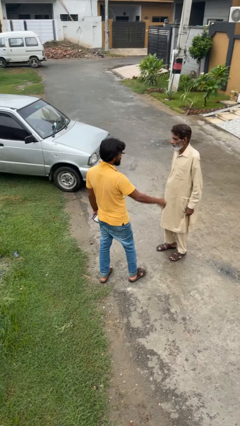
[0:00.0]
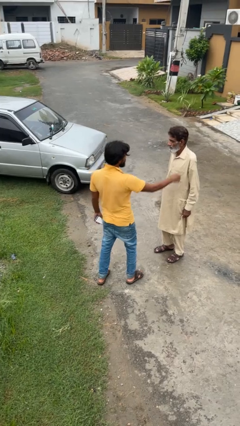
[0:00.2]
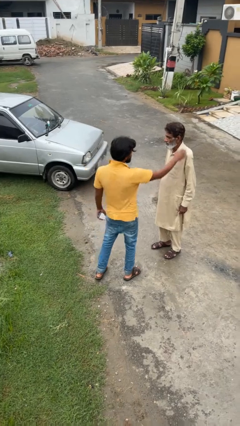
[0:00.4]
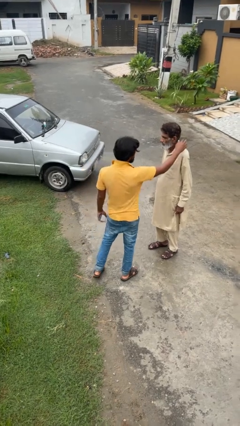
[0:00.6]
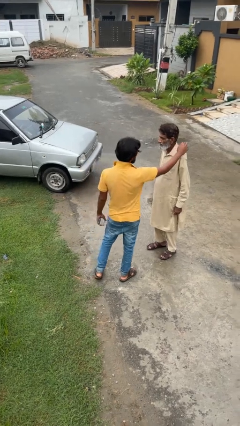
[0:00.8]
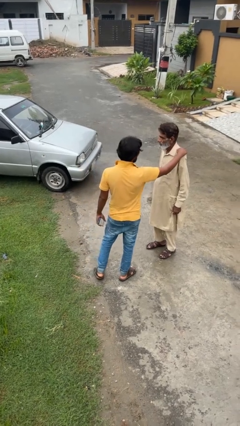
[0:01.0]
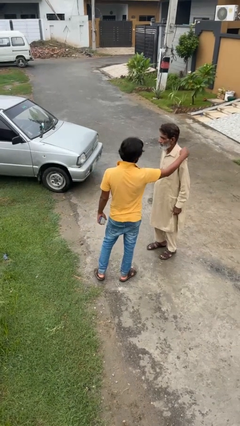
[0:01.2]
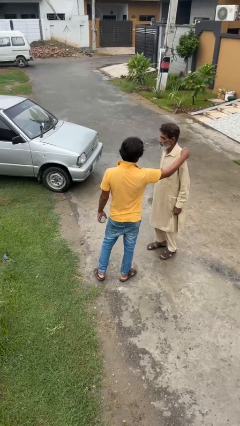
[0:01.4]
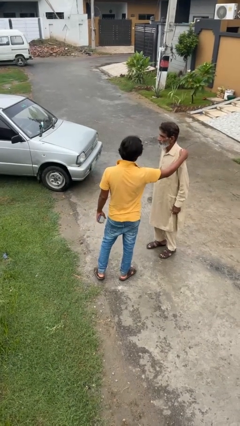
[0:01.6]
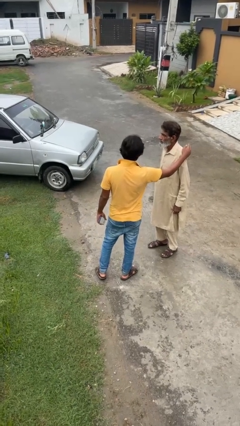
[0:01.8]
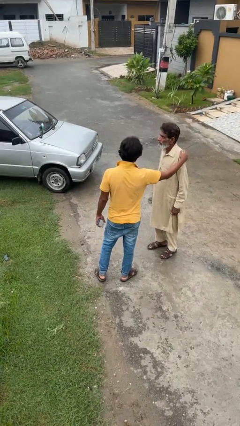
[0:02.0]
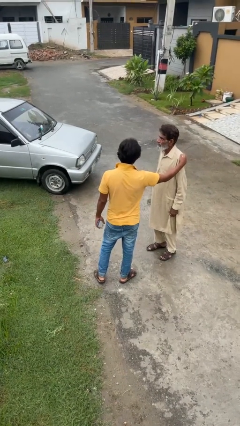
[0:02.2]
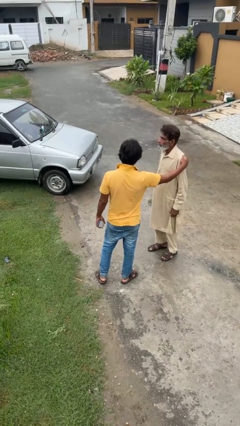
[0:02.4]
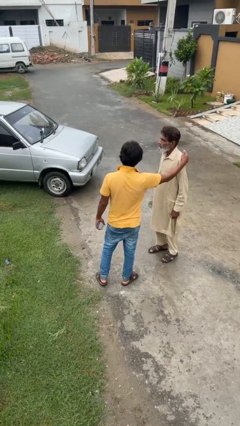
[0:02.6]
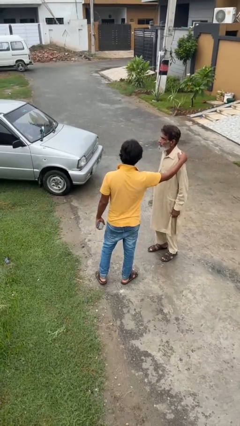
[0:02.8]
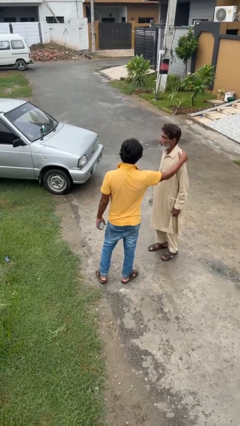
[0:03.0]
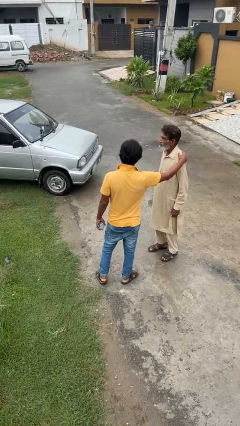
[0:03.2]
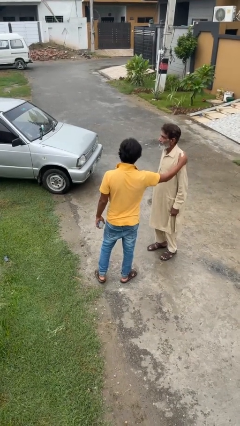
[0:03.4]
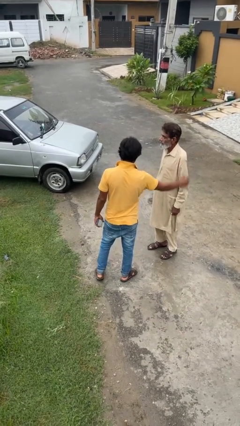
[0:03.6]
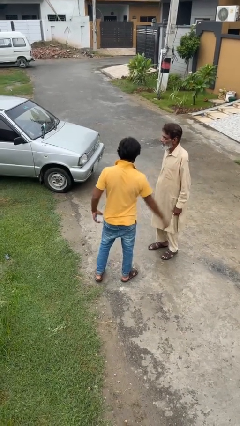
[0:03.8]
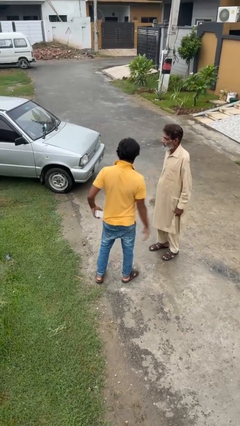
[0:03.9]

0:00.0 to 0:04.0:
person pounds shoulders of person

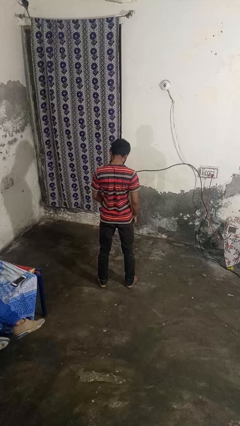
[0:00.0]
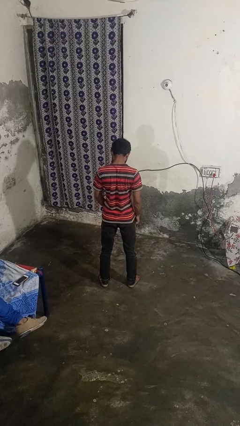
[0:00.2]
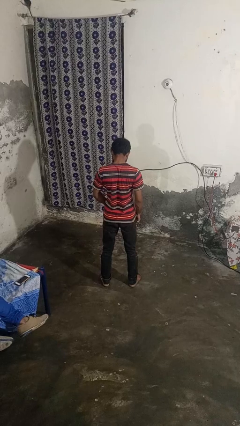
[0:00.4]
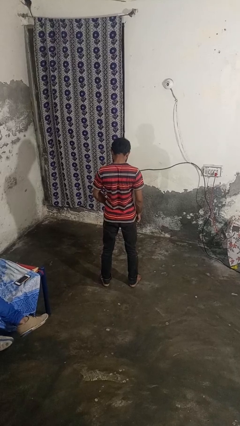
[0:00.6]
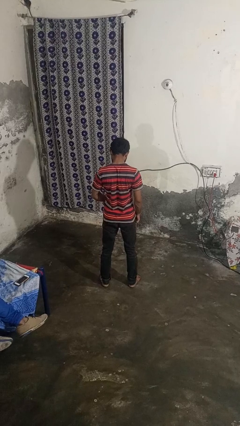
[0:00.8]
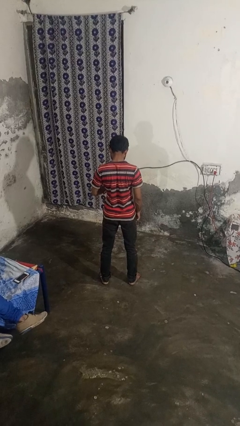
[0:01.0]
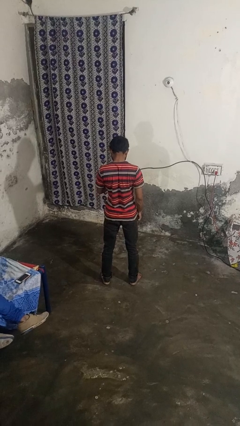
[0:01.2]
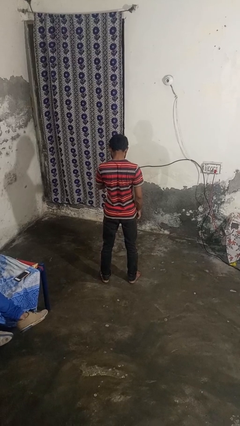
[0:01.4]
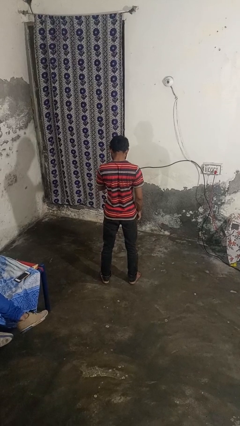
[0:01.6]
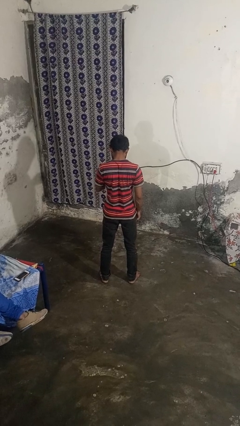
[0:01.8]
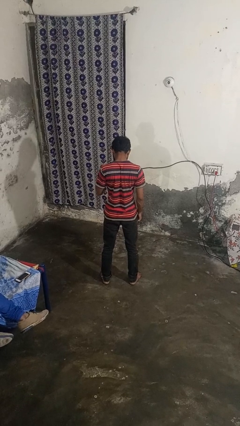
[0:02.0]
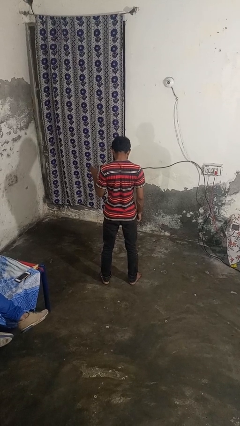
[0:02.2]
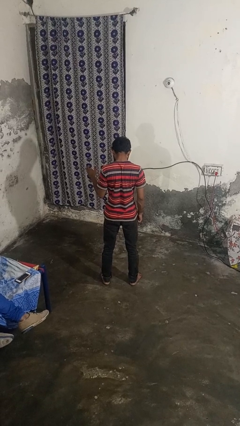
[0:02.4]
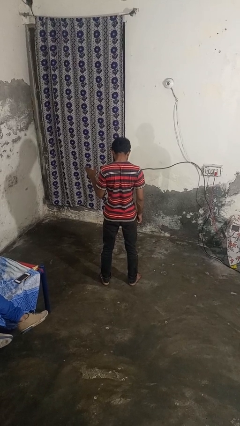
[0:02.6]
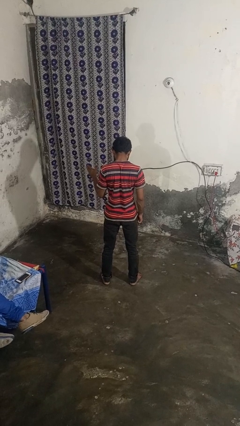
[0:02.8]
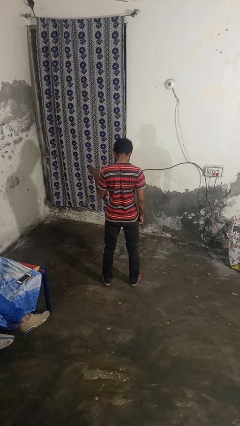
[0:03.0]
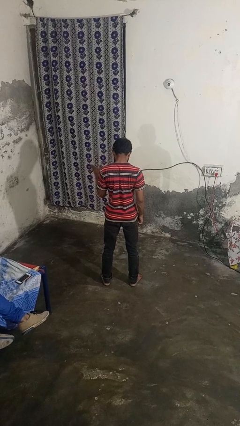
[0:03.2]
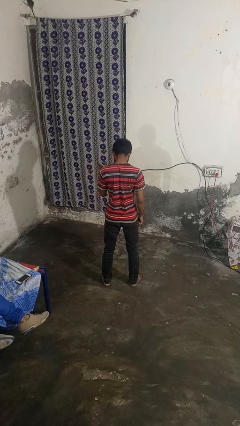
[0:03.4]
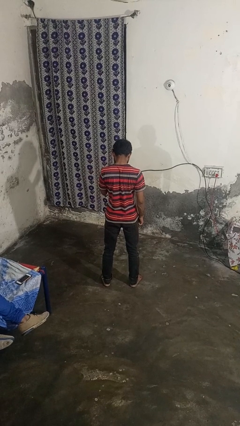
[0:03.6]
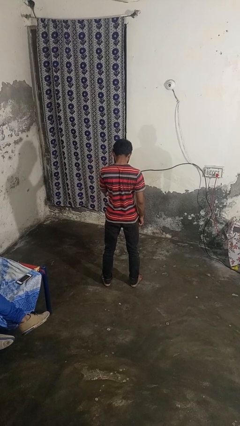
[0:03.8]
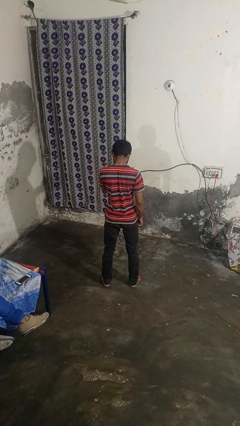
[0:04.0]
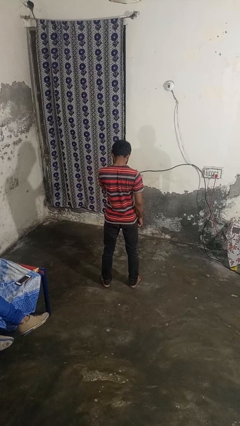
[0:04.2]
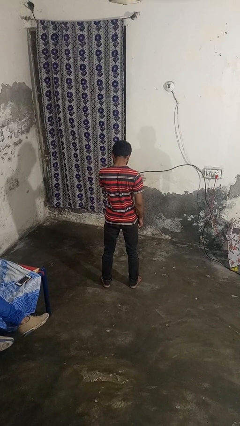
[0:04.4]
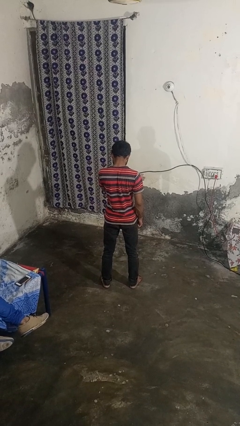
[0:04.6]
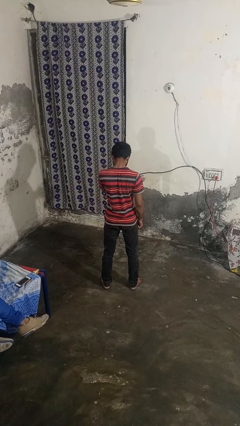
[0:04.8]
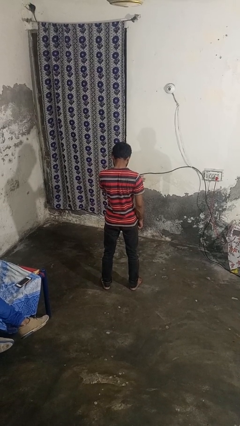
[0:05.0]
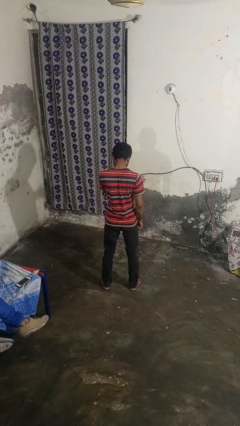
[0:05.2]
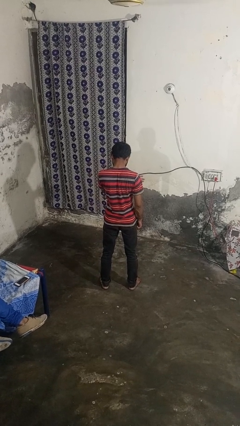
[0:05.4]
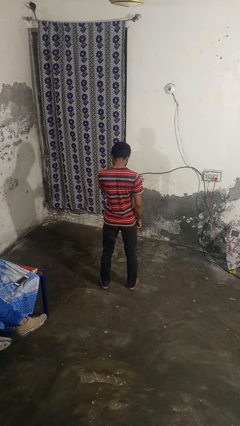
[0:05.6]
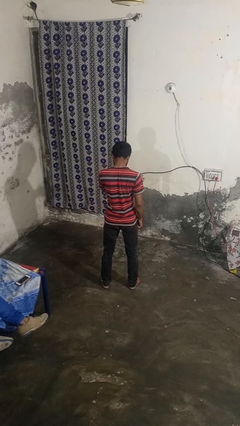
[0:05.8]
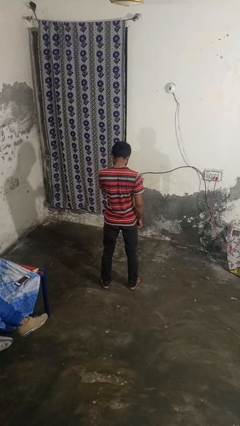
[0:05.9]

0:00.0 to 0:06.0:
person gestures swipe left

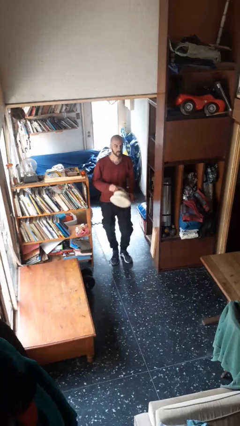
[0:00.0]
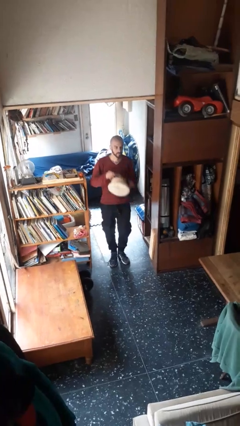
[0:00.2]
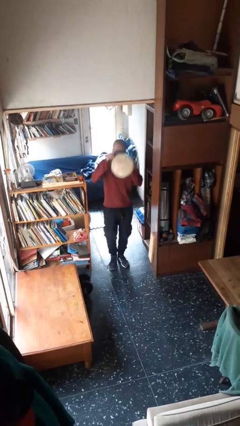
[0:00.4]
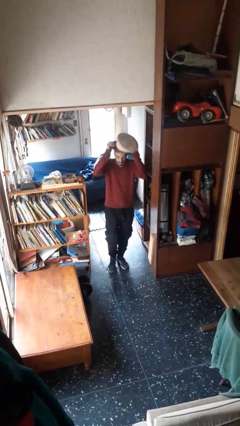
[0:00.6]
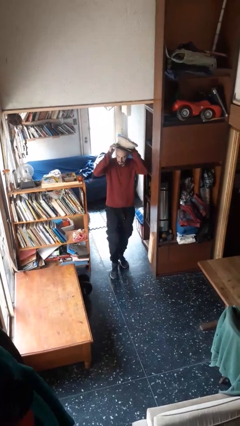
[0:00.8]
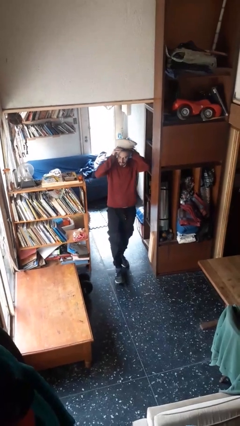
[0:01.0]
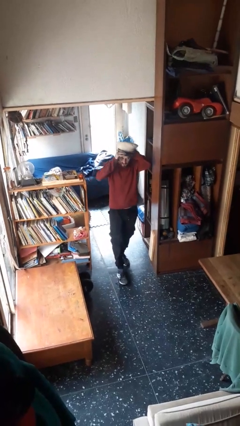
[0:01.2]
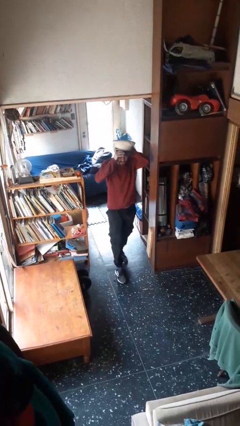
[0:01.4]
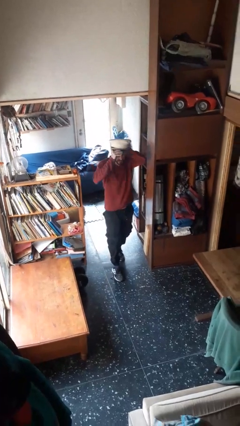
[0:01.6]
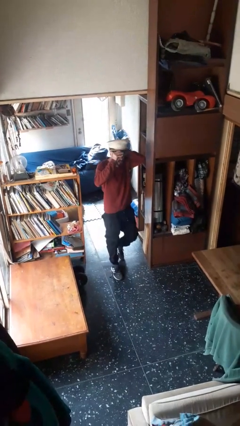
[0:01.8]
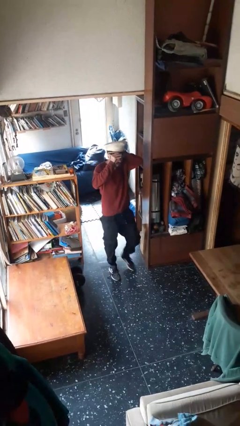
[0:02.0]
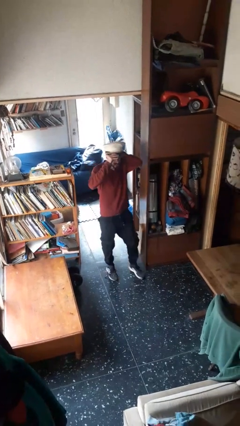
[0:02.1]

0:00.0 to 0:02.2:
person puts on hat

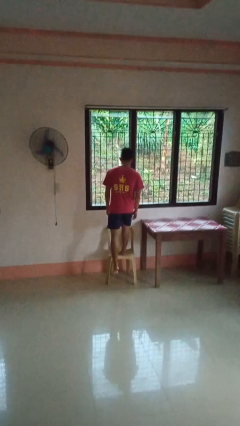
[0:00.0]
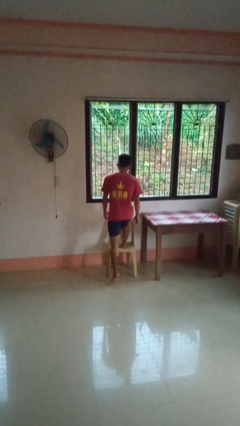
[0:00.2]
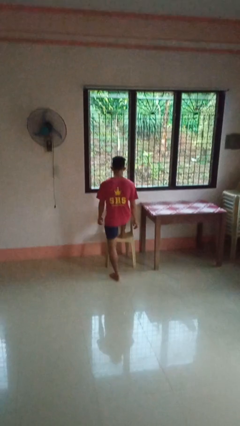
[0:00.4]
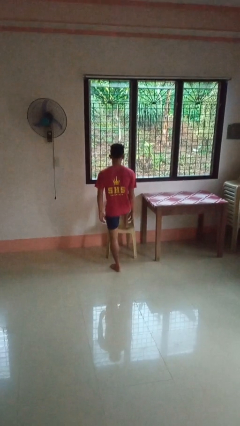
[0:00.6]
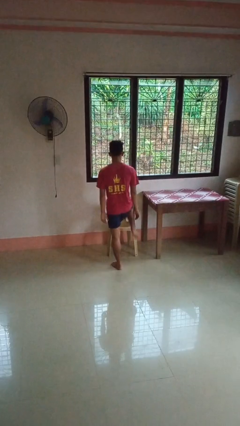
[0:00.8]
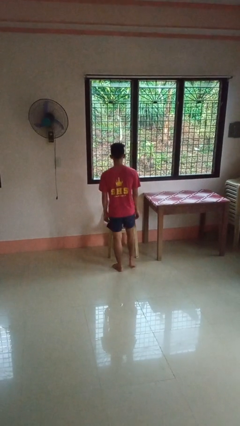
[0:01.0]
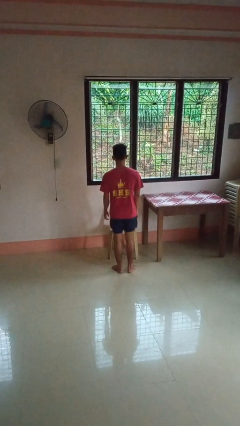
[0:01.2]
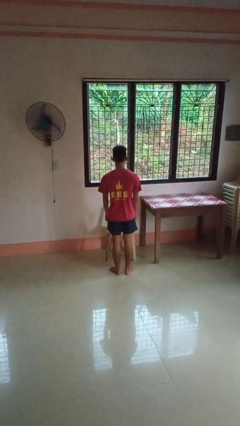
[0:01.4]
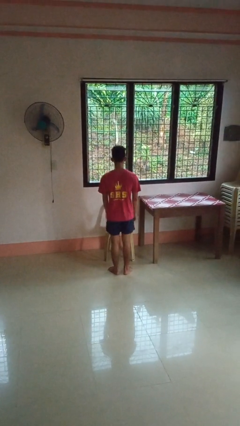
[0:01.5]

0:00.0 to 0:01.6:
person climbs off chair

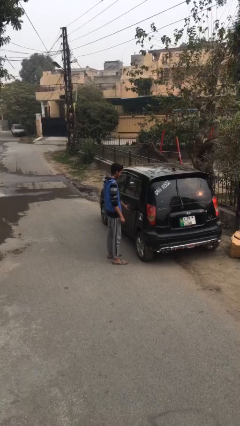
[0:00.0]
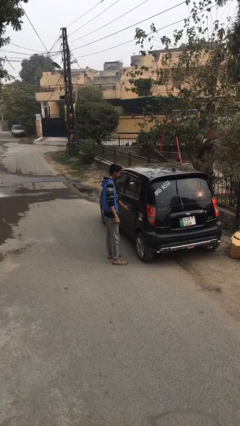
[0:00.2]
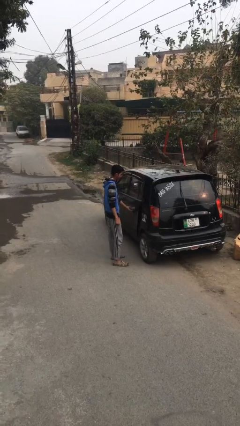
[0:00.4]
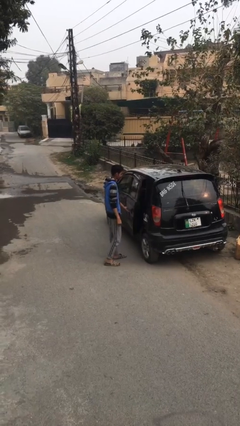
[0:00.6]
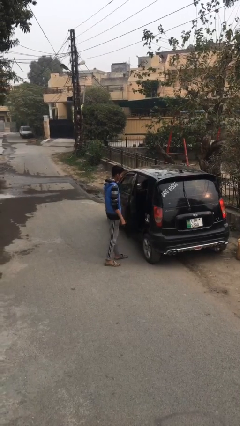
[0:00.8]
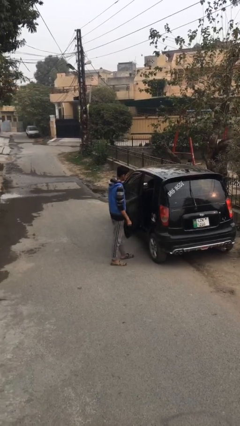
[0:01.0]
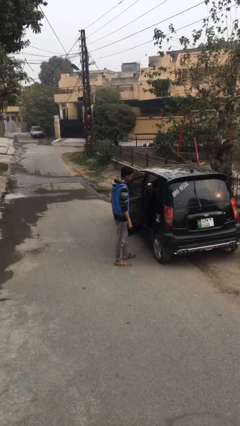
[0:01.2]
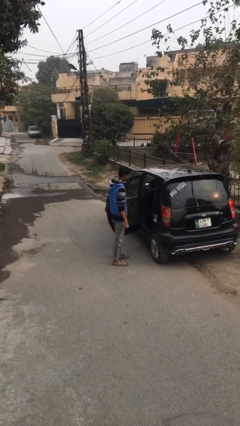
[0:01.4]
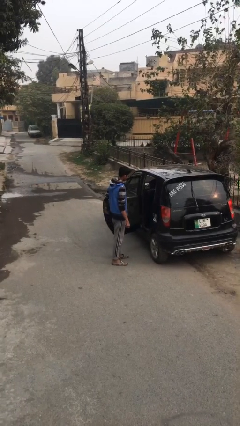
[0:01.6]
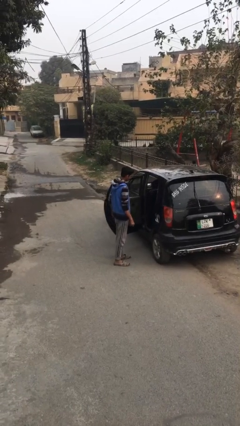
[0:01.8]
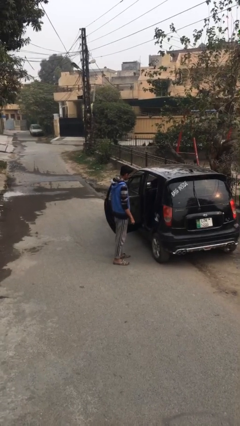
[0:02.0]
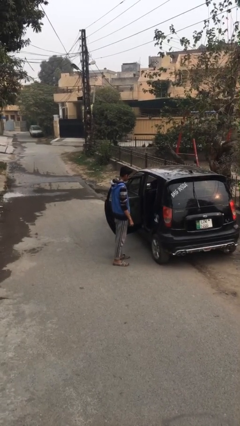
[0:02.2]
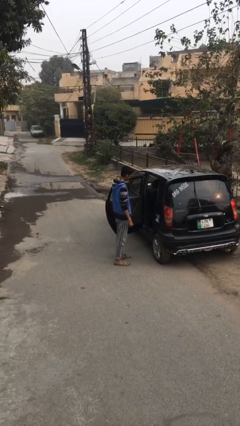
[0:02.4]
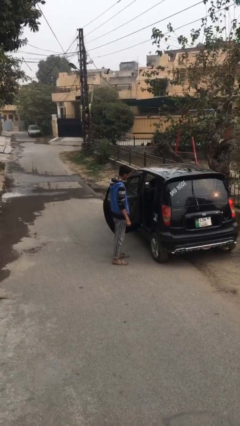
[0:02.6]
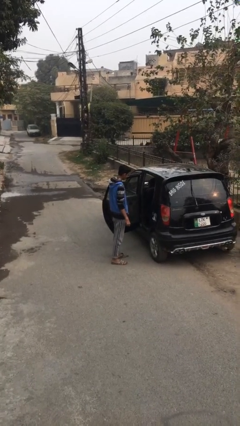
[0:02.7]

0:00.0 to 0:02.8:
person opens car door

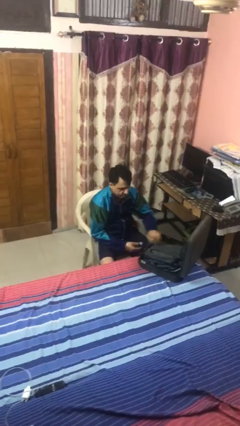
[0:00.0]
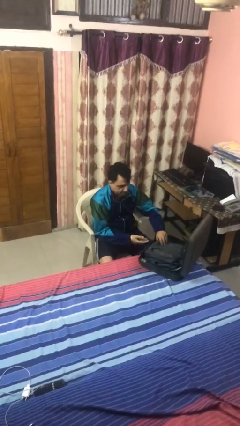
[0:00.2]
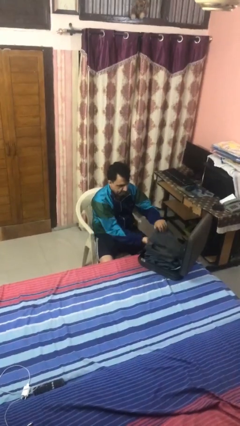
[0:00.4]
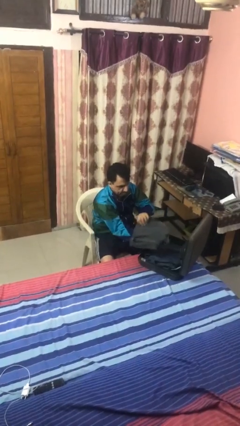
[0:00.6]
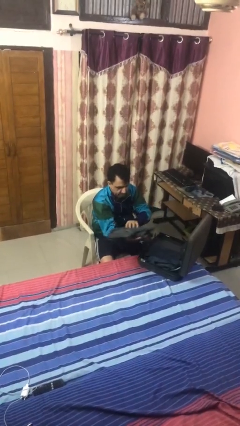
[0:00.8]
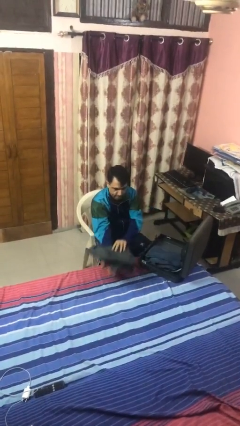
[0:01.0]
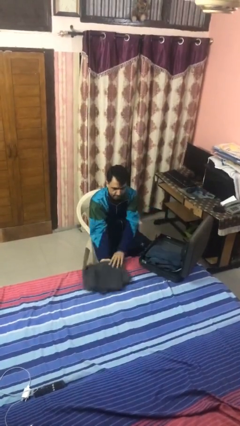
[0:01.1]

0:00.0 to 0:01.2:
person unloads clothes from suitcase
